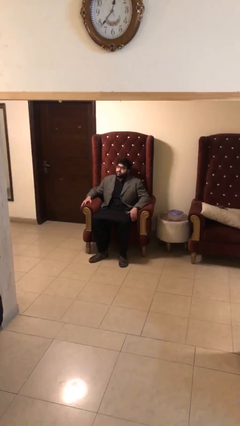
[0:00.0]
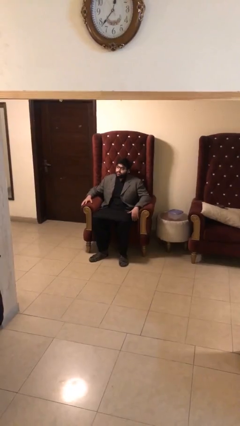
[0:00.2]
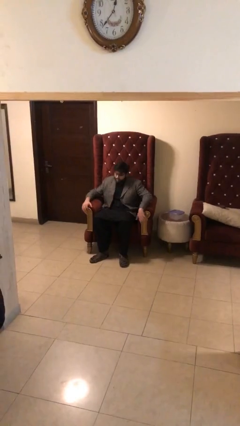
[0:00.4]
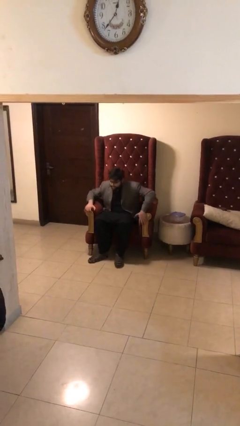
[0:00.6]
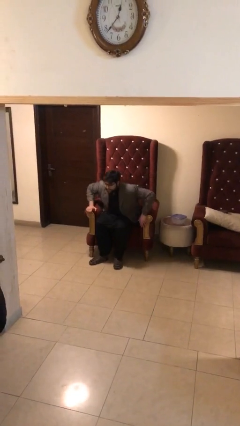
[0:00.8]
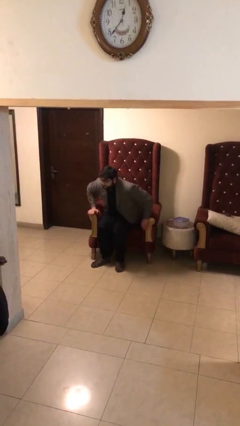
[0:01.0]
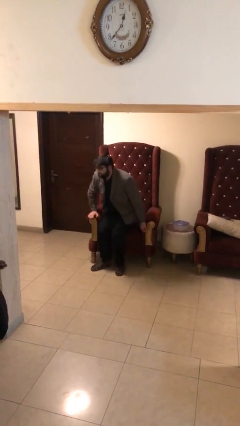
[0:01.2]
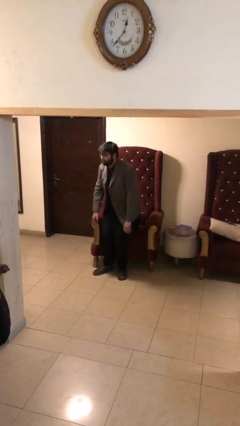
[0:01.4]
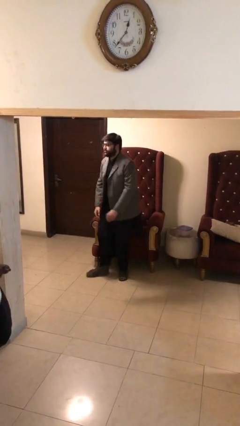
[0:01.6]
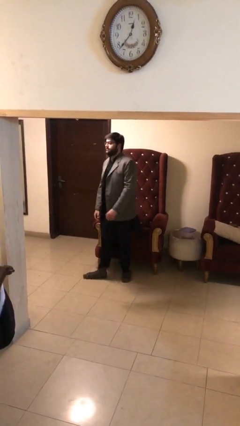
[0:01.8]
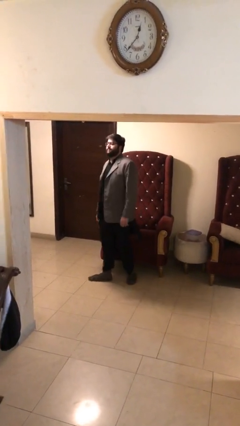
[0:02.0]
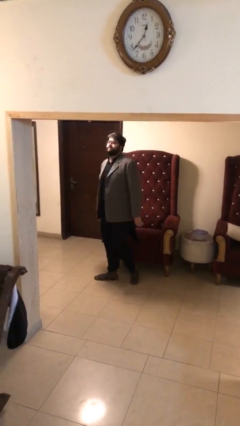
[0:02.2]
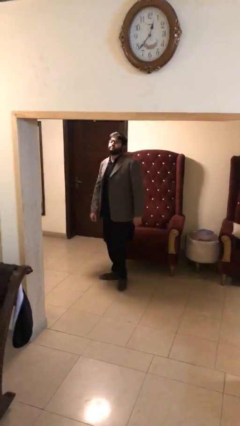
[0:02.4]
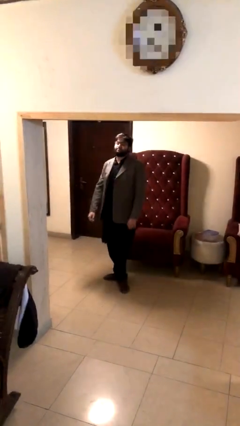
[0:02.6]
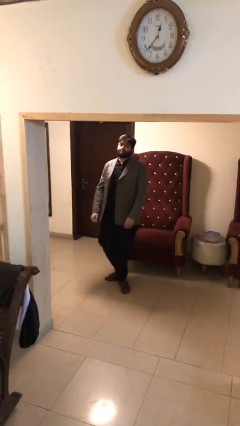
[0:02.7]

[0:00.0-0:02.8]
person stands up

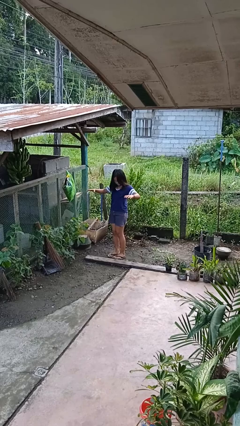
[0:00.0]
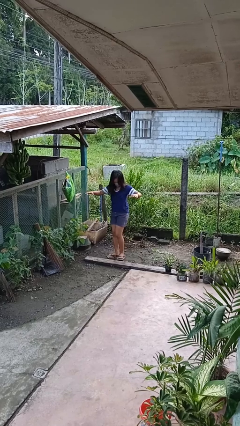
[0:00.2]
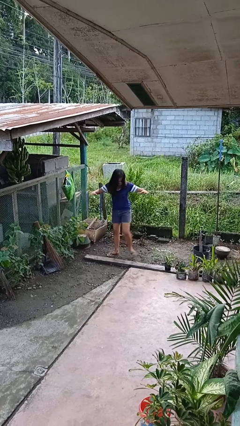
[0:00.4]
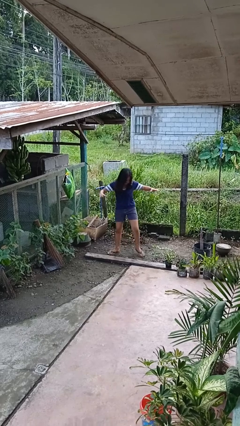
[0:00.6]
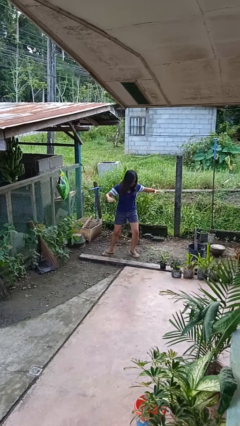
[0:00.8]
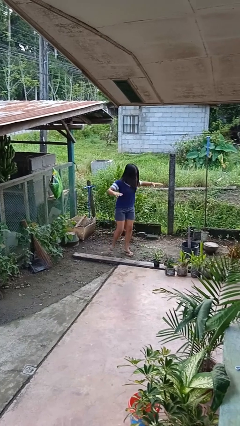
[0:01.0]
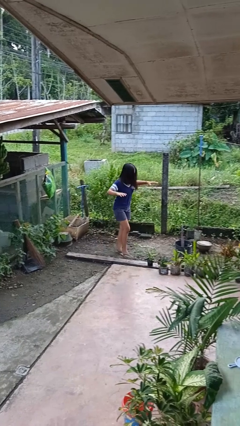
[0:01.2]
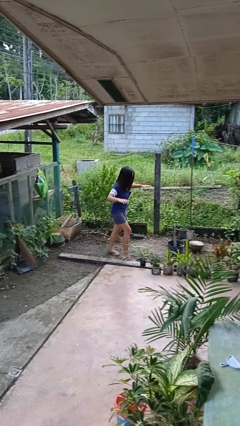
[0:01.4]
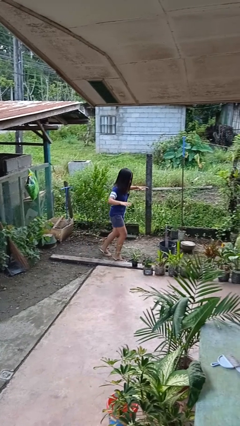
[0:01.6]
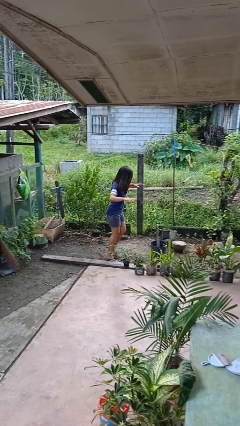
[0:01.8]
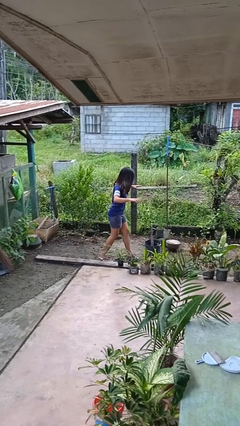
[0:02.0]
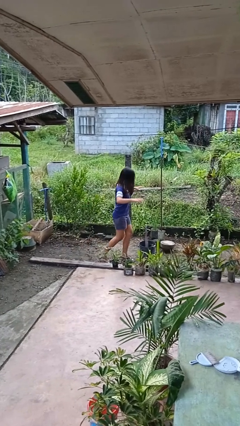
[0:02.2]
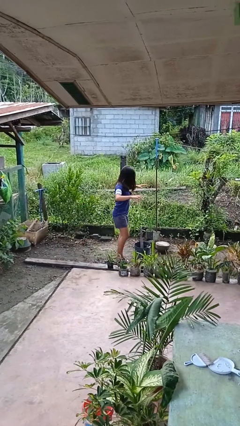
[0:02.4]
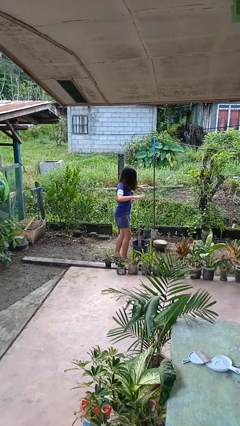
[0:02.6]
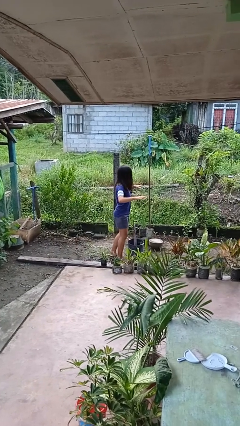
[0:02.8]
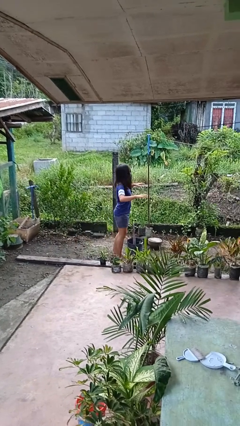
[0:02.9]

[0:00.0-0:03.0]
person walks tiptoe

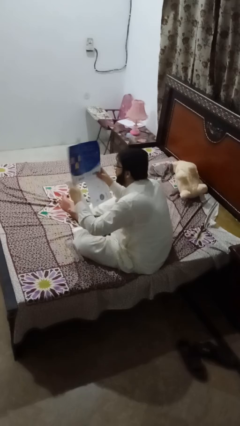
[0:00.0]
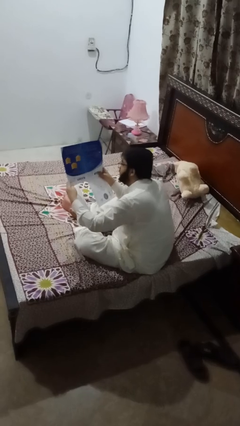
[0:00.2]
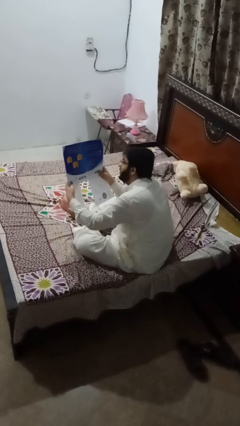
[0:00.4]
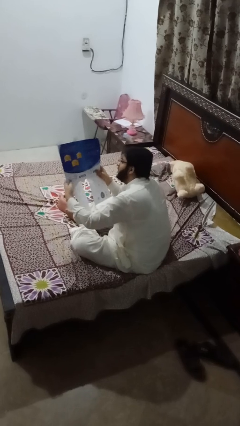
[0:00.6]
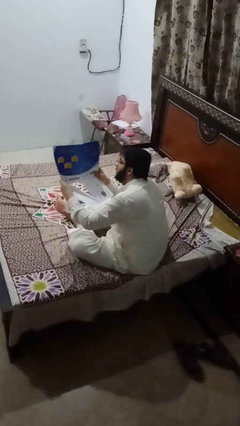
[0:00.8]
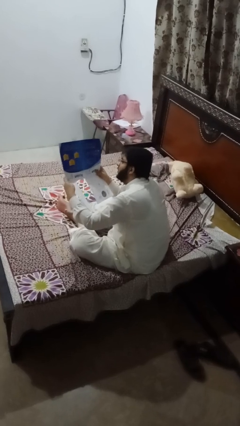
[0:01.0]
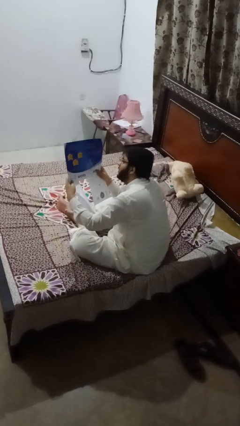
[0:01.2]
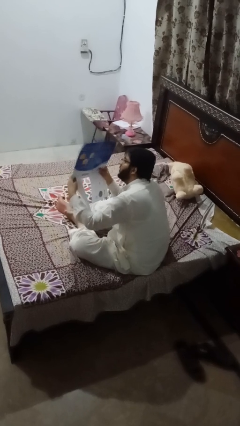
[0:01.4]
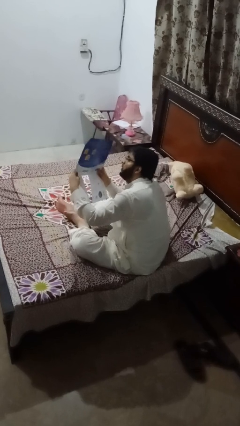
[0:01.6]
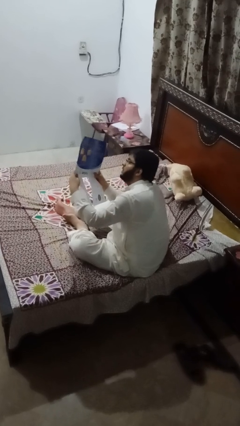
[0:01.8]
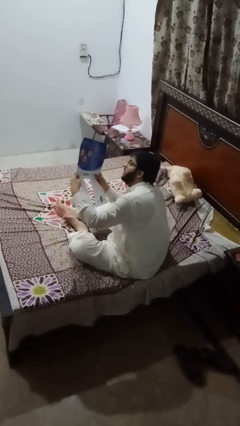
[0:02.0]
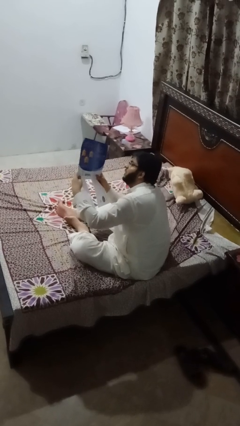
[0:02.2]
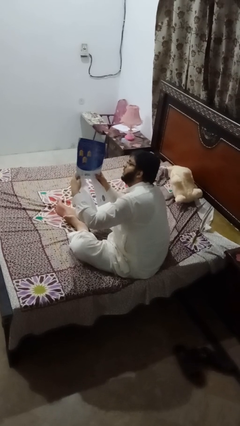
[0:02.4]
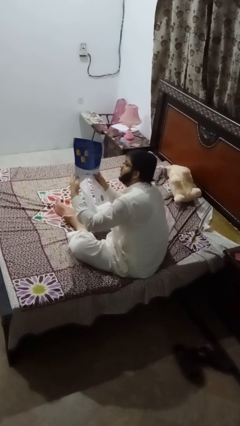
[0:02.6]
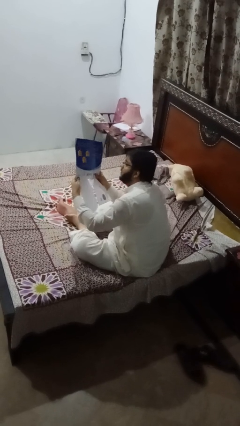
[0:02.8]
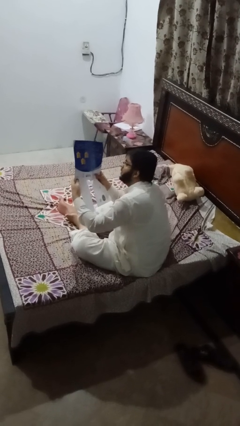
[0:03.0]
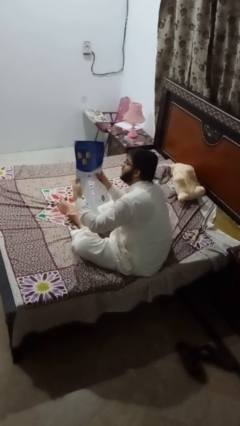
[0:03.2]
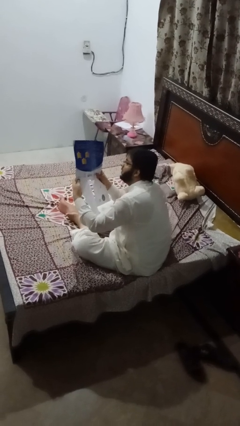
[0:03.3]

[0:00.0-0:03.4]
person reads newspaper

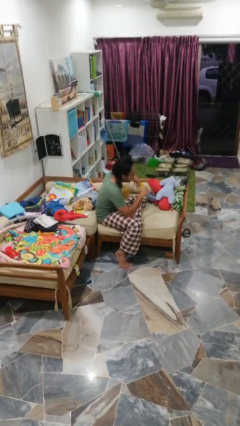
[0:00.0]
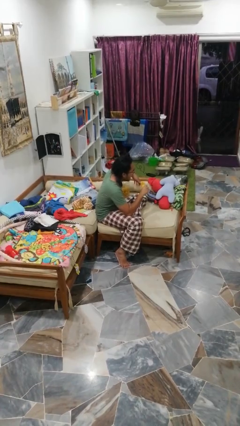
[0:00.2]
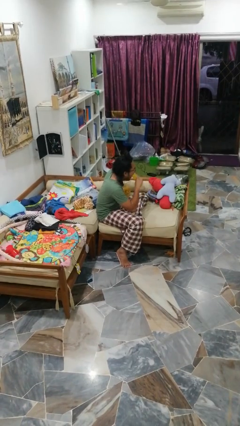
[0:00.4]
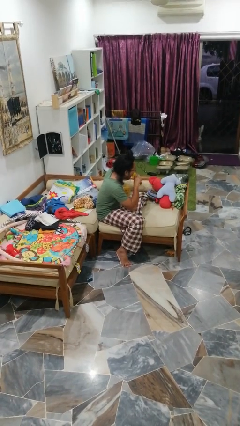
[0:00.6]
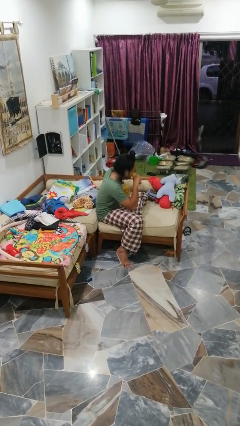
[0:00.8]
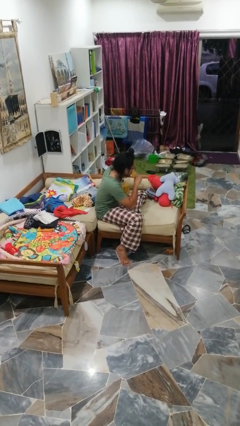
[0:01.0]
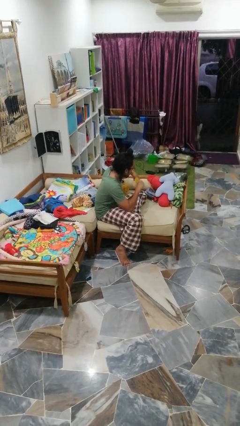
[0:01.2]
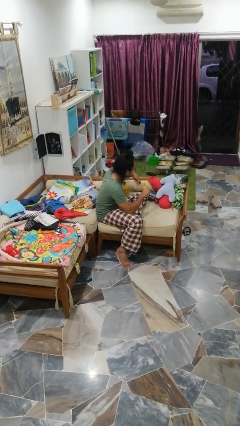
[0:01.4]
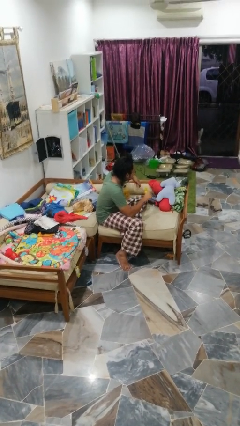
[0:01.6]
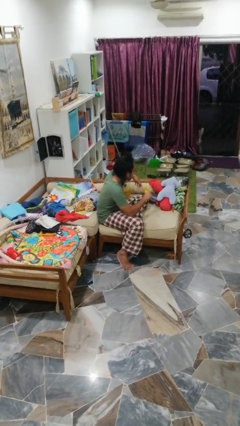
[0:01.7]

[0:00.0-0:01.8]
person eats banana

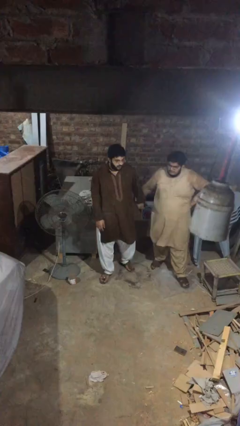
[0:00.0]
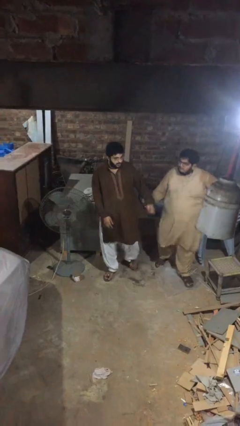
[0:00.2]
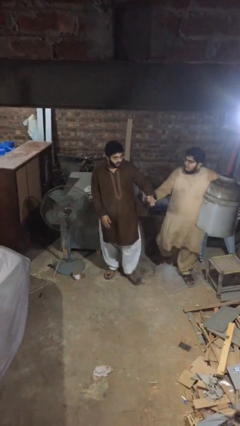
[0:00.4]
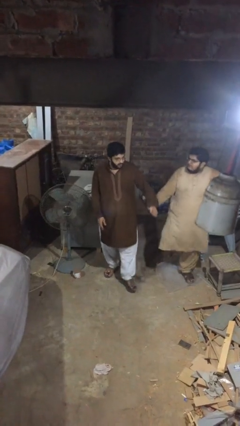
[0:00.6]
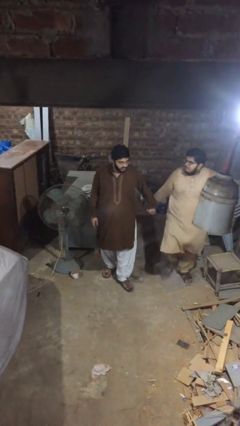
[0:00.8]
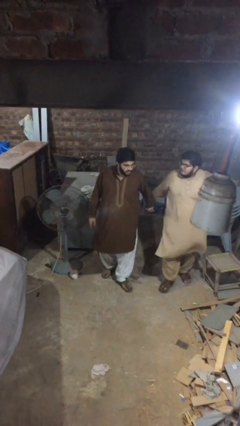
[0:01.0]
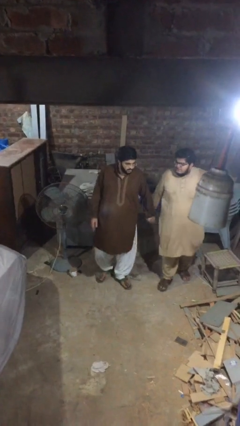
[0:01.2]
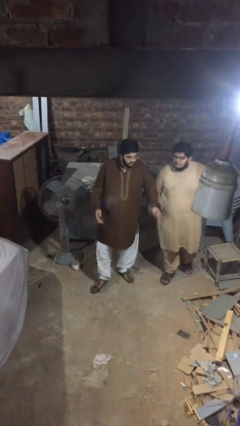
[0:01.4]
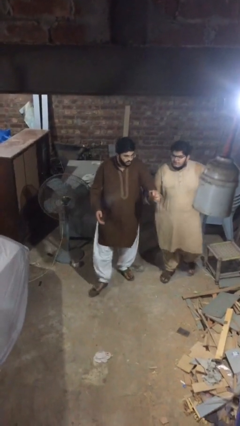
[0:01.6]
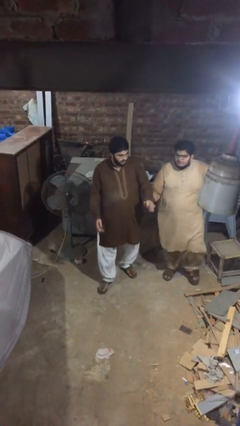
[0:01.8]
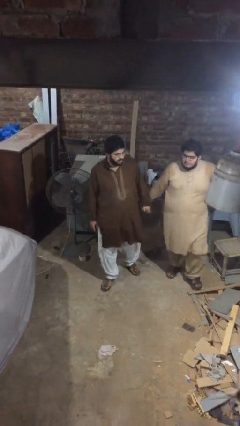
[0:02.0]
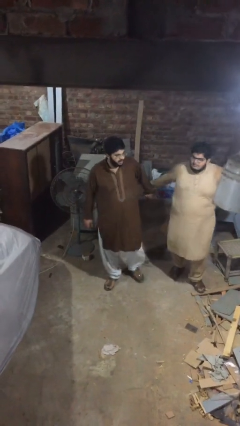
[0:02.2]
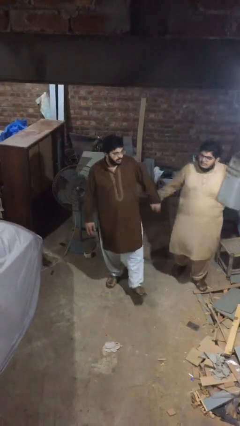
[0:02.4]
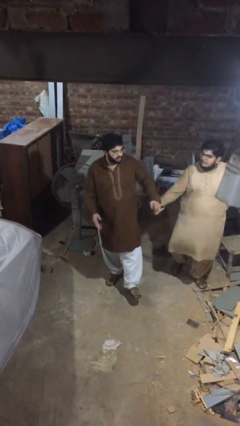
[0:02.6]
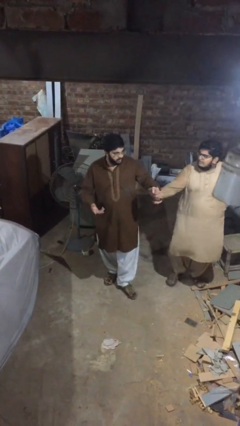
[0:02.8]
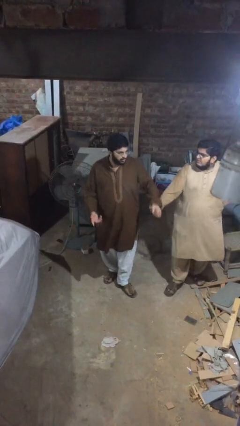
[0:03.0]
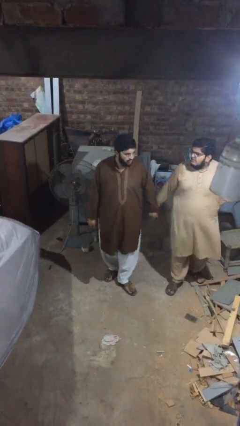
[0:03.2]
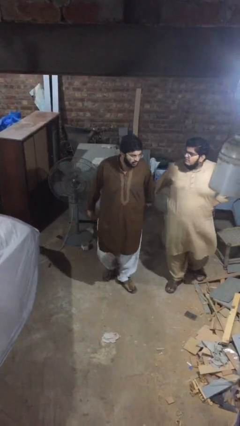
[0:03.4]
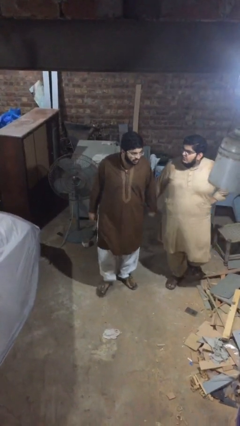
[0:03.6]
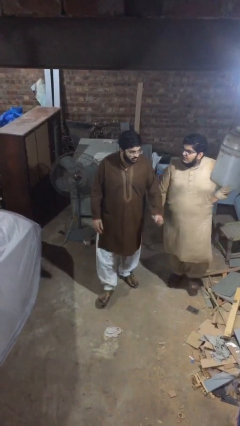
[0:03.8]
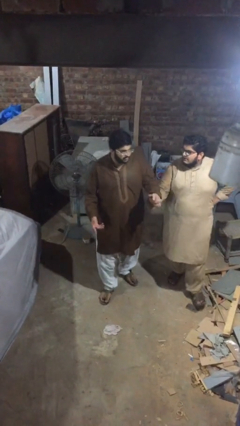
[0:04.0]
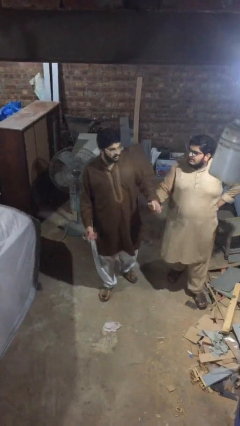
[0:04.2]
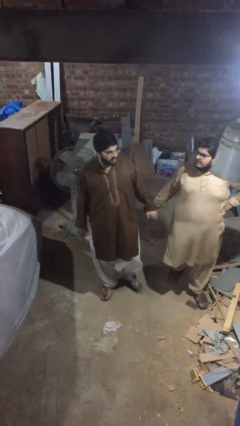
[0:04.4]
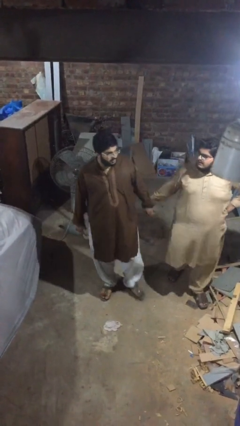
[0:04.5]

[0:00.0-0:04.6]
person holds hand

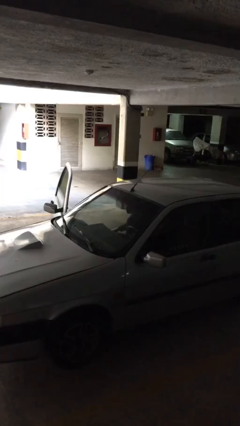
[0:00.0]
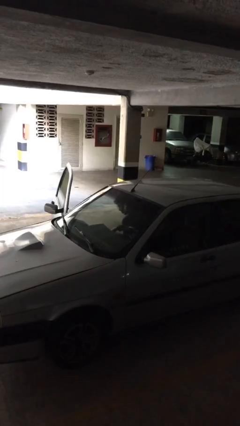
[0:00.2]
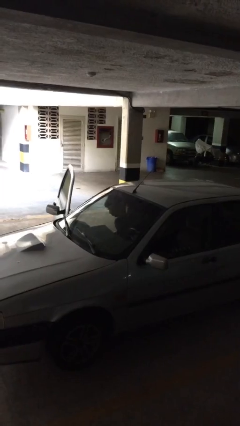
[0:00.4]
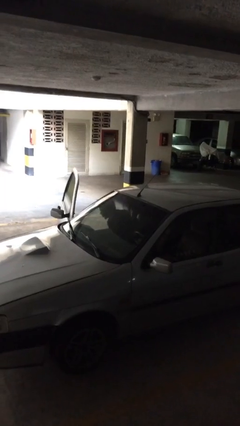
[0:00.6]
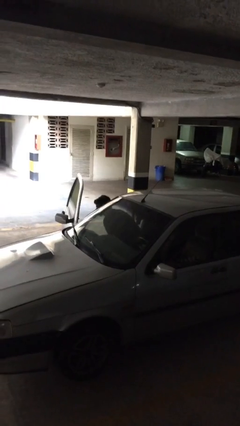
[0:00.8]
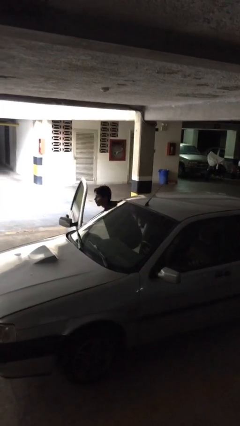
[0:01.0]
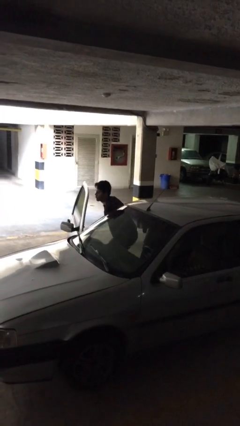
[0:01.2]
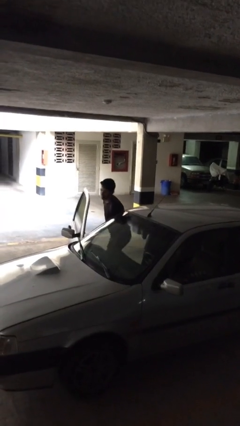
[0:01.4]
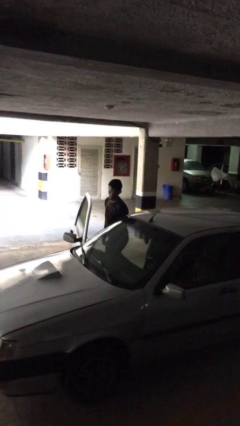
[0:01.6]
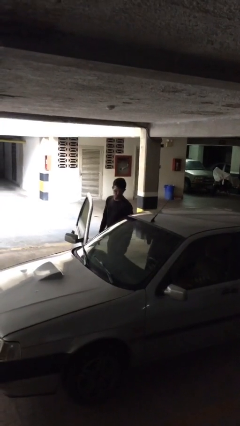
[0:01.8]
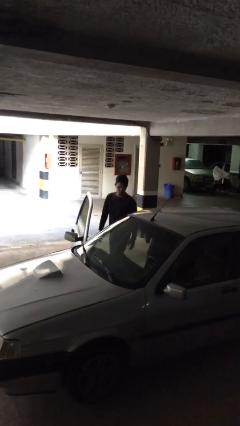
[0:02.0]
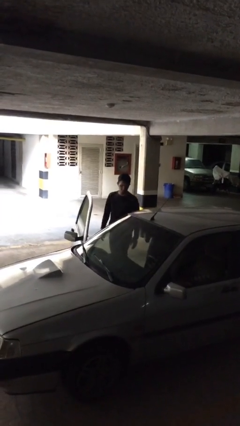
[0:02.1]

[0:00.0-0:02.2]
person exits car
